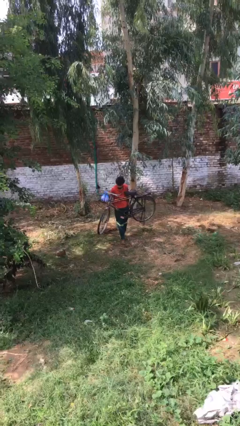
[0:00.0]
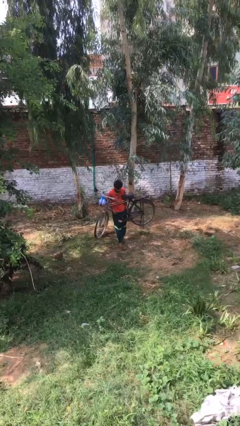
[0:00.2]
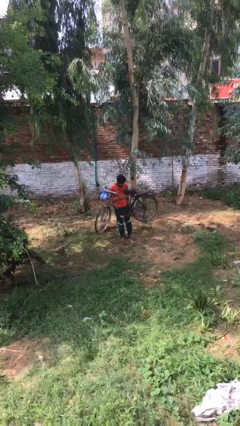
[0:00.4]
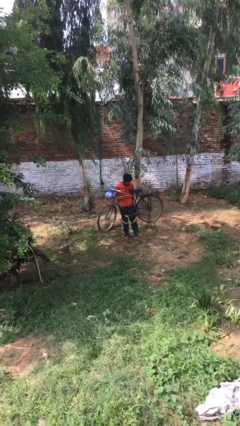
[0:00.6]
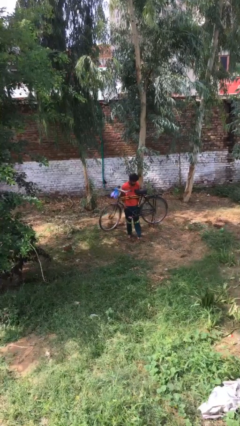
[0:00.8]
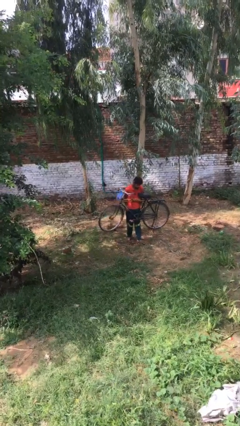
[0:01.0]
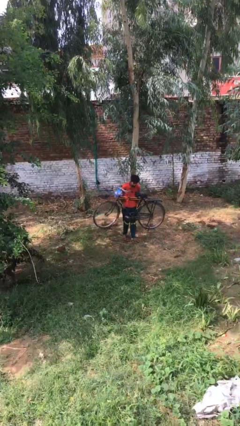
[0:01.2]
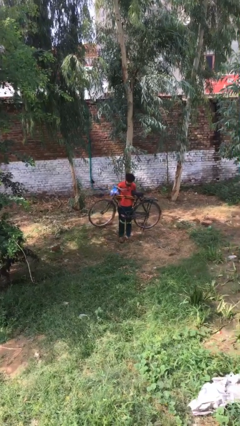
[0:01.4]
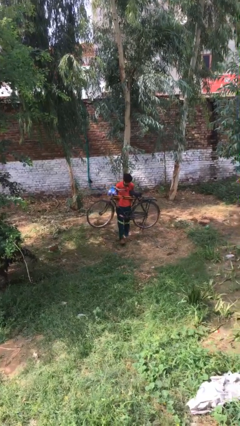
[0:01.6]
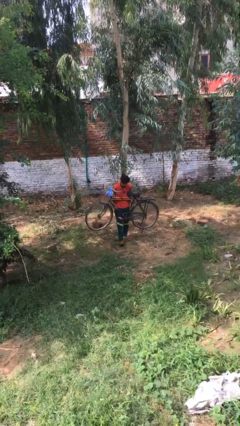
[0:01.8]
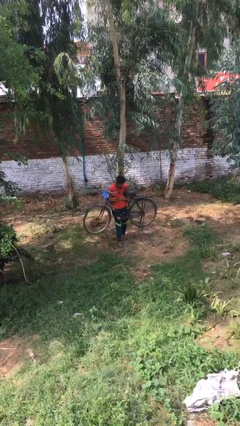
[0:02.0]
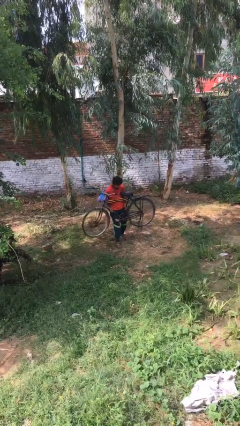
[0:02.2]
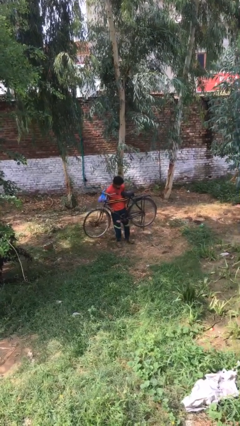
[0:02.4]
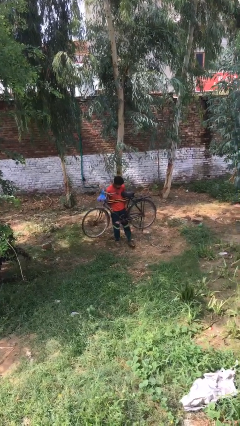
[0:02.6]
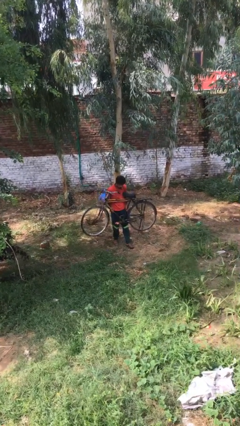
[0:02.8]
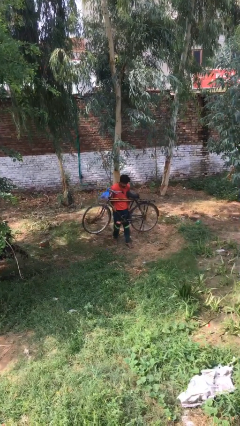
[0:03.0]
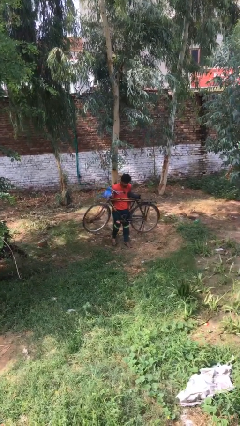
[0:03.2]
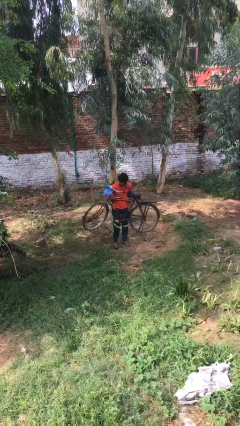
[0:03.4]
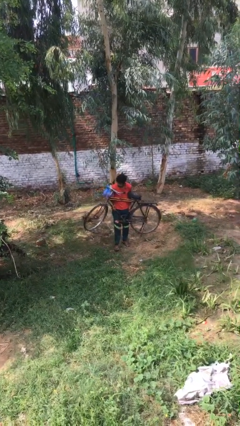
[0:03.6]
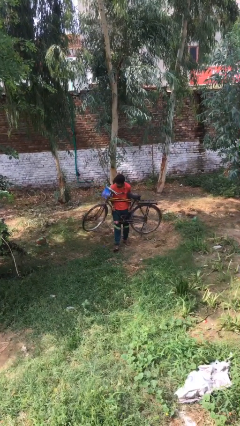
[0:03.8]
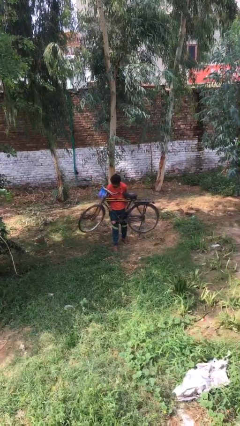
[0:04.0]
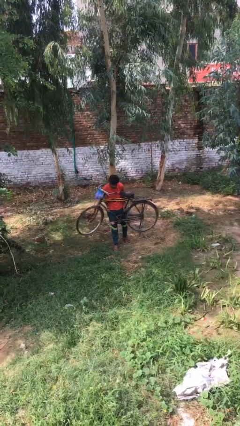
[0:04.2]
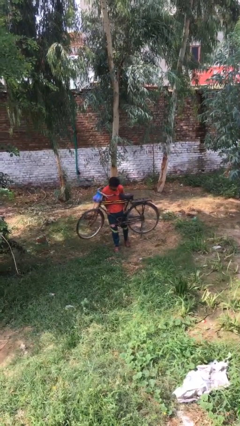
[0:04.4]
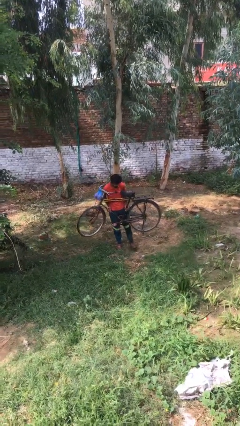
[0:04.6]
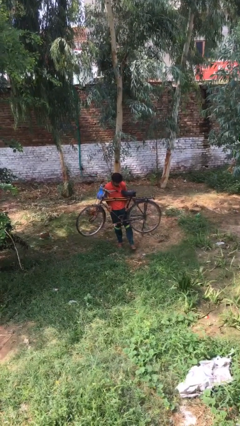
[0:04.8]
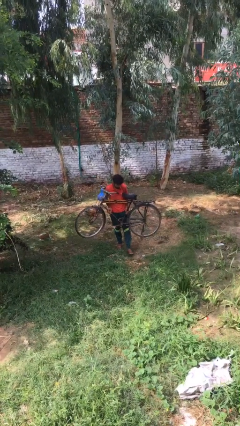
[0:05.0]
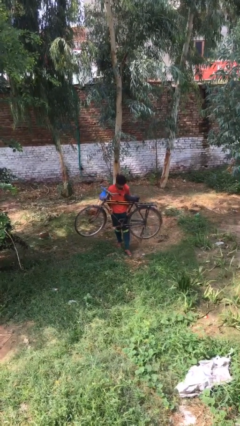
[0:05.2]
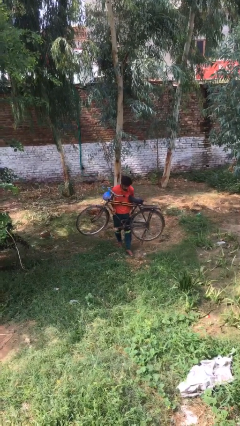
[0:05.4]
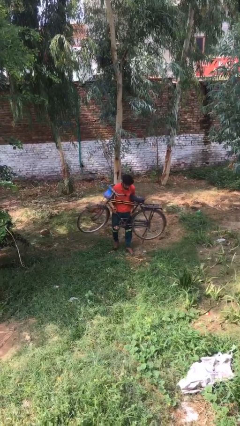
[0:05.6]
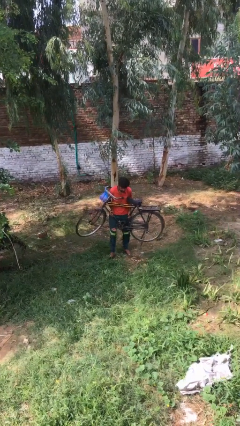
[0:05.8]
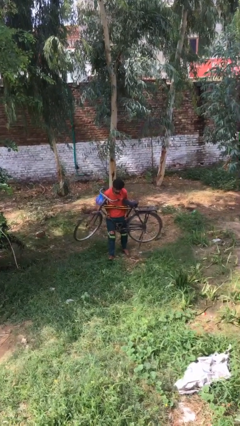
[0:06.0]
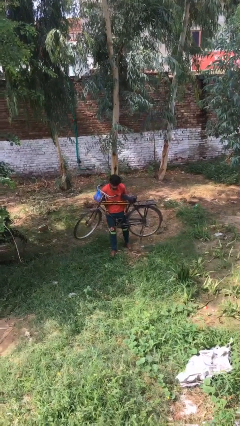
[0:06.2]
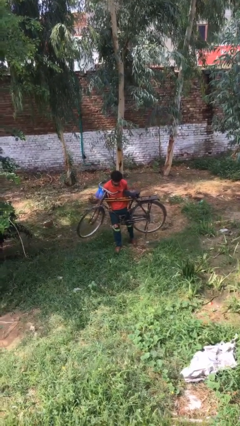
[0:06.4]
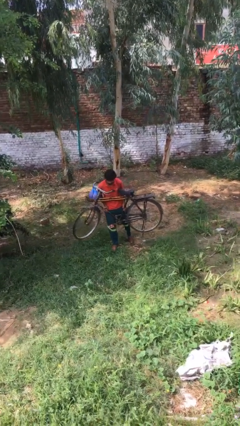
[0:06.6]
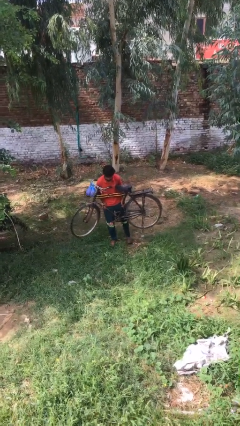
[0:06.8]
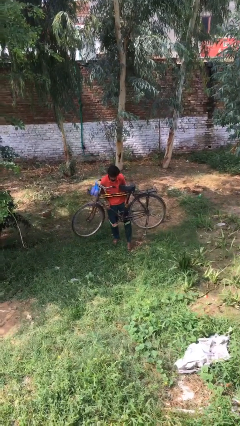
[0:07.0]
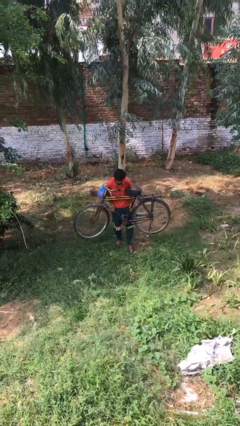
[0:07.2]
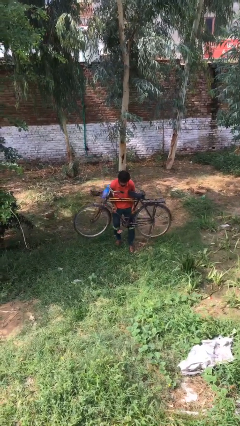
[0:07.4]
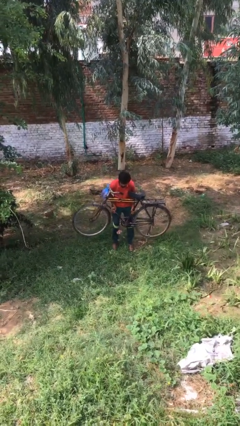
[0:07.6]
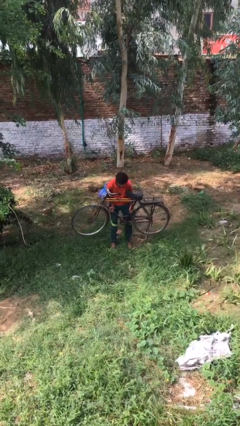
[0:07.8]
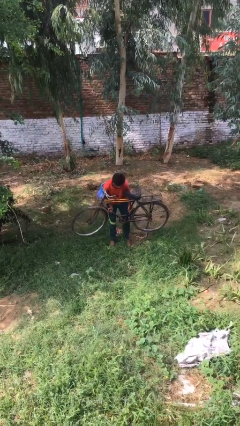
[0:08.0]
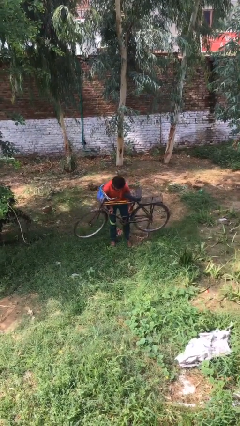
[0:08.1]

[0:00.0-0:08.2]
person carries heavy object

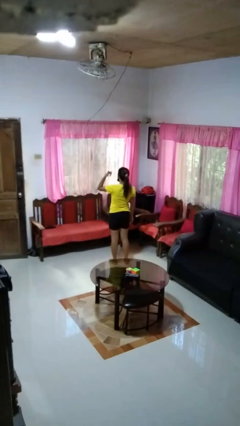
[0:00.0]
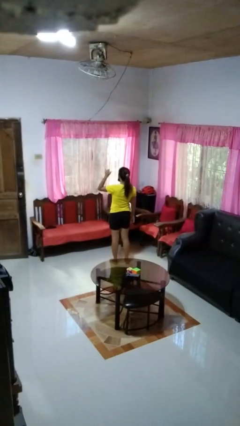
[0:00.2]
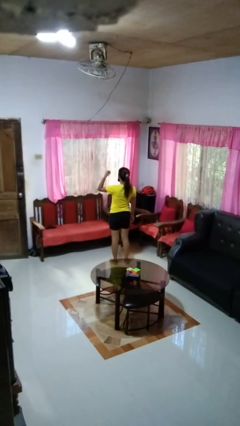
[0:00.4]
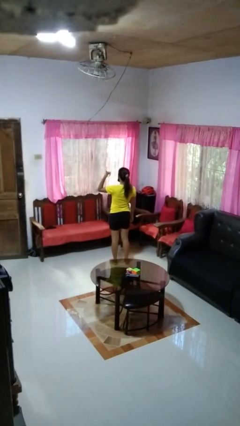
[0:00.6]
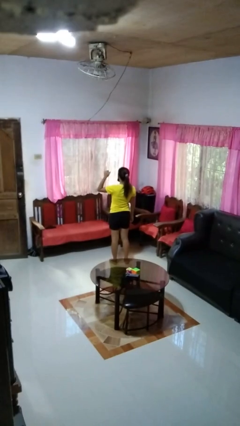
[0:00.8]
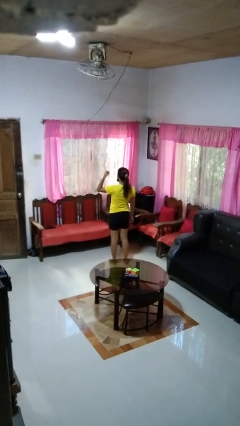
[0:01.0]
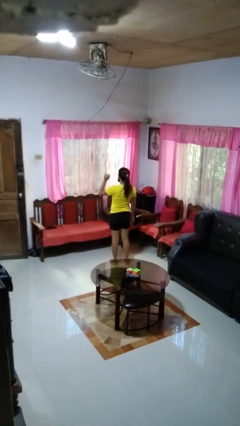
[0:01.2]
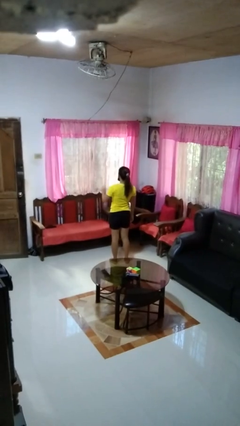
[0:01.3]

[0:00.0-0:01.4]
person gestures hang loose

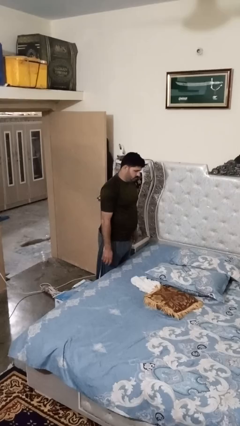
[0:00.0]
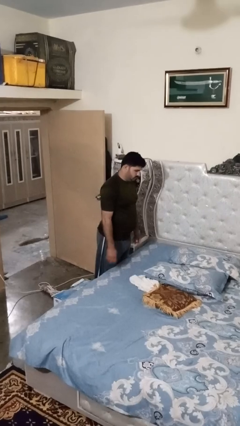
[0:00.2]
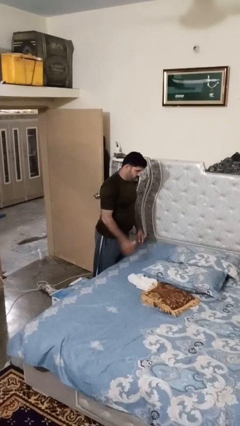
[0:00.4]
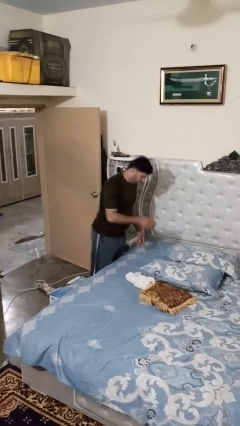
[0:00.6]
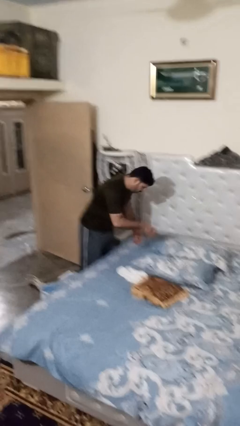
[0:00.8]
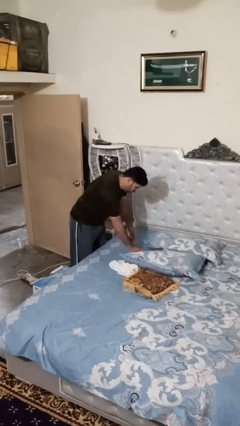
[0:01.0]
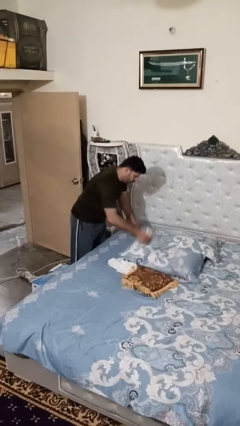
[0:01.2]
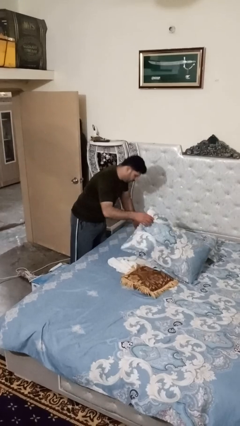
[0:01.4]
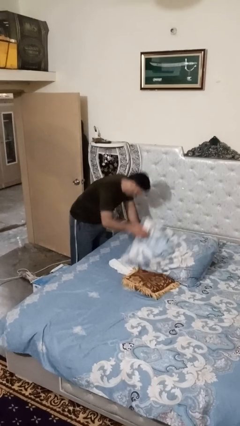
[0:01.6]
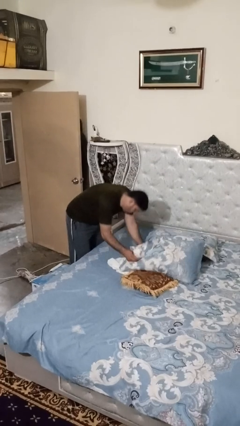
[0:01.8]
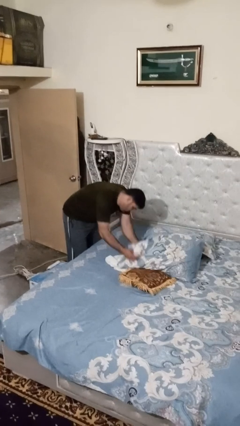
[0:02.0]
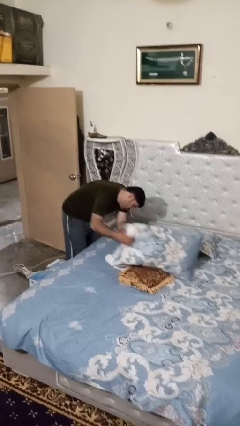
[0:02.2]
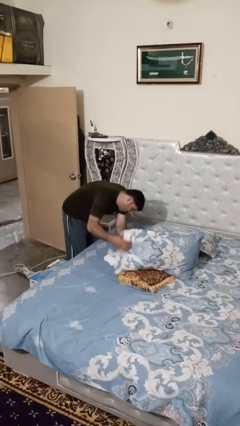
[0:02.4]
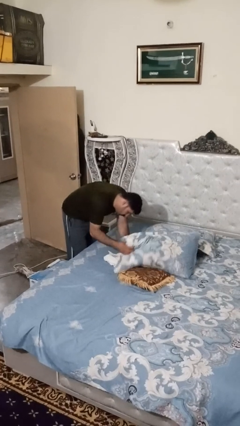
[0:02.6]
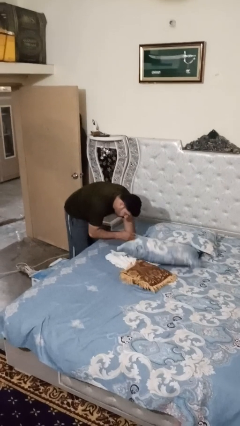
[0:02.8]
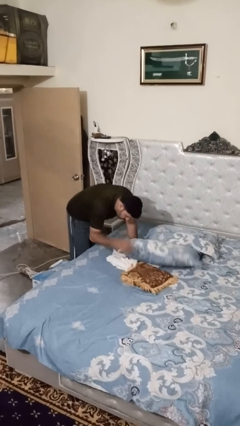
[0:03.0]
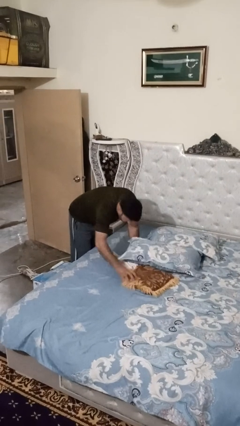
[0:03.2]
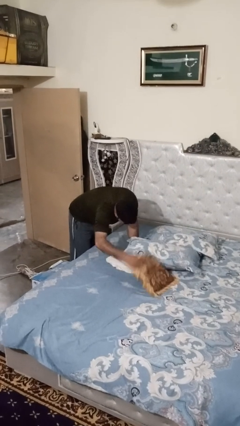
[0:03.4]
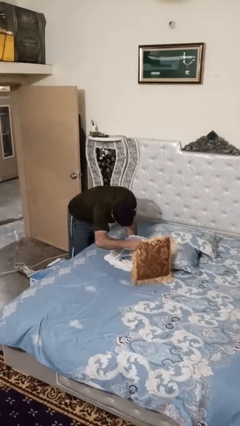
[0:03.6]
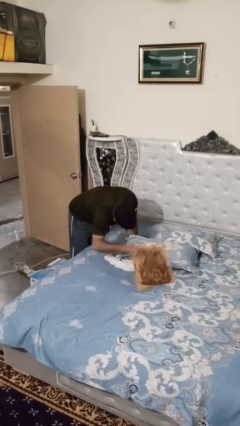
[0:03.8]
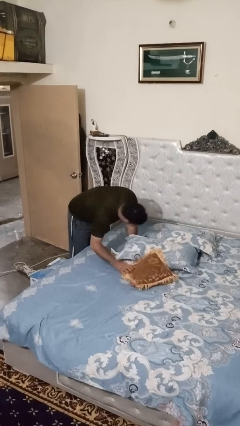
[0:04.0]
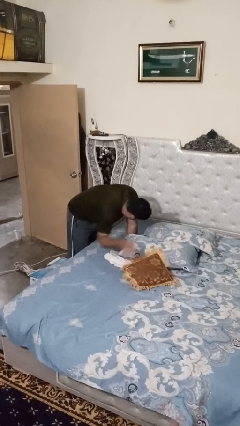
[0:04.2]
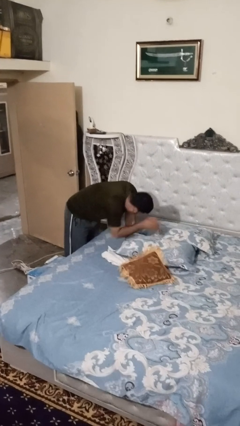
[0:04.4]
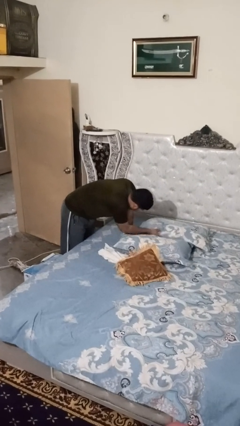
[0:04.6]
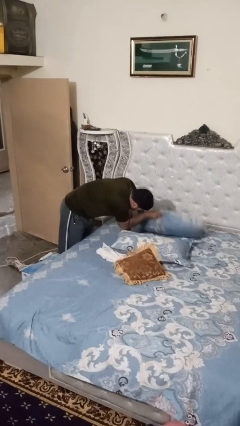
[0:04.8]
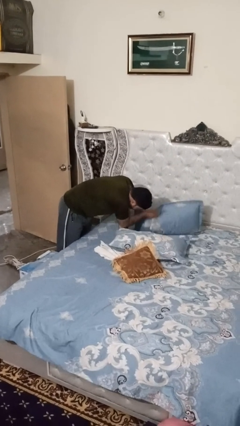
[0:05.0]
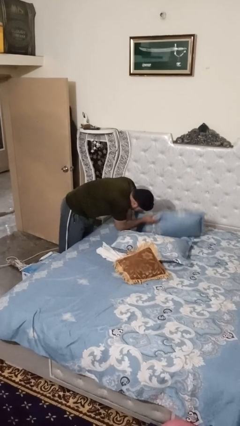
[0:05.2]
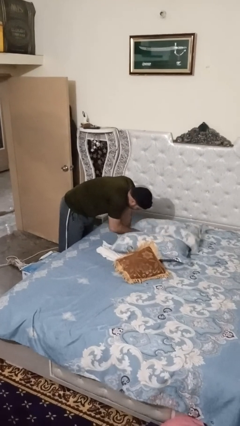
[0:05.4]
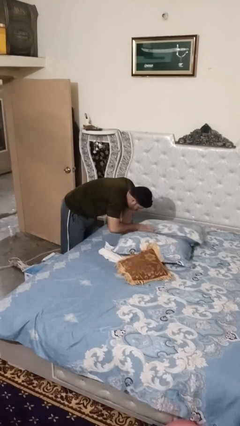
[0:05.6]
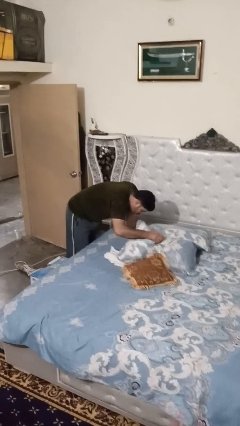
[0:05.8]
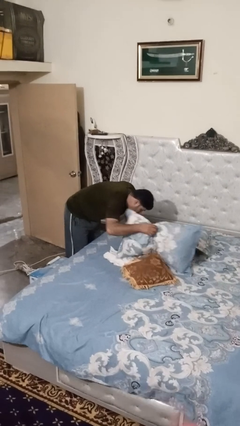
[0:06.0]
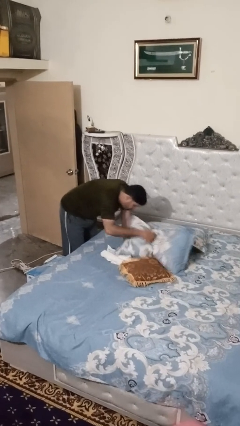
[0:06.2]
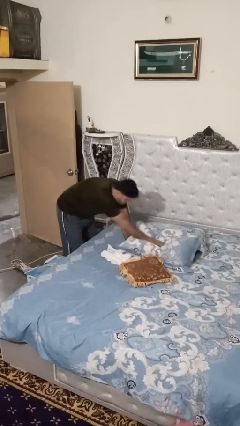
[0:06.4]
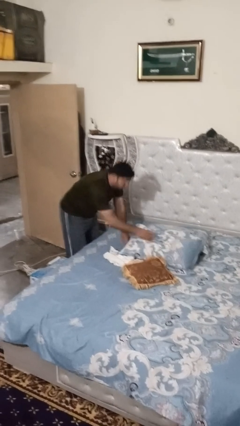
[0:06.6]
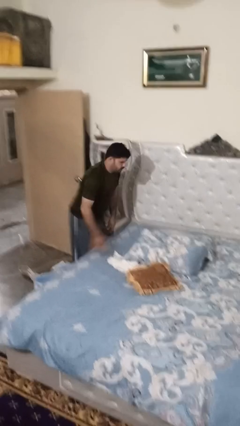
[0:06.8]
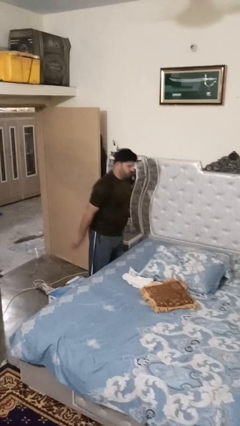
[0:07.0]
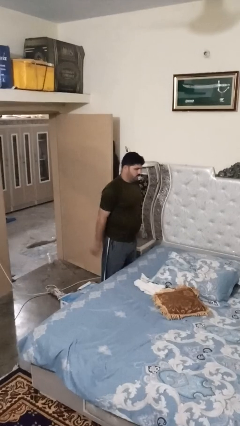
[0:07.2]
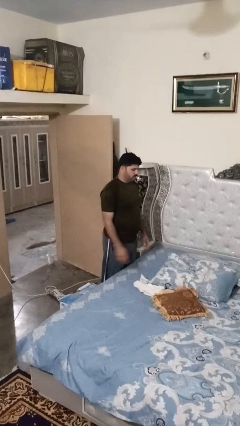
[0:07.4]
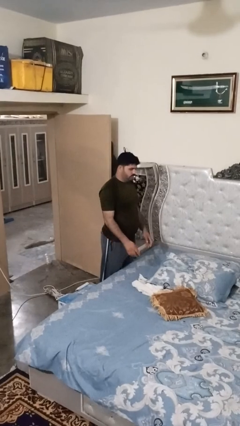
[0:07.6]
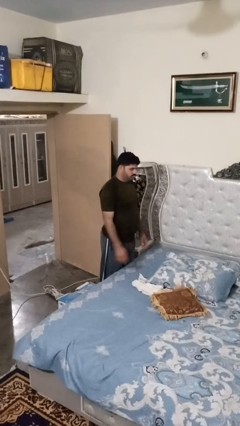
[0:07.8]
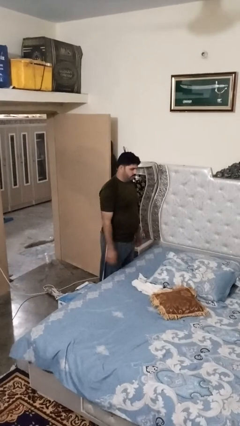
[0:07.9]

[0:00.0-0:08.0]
person searches under bed

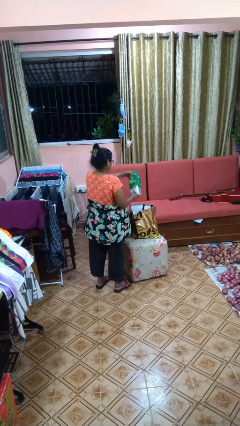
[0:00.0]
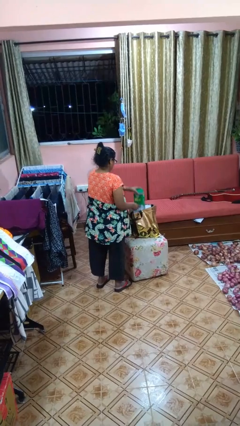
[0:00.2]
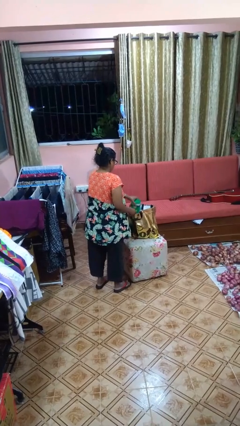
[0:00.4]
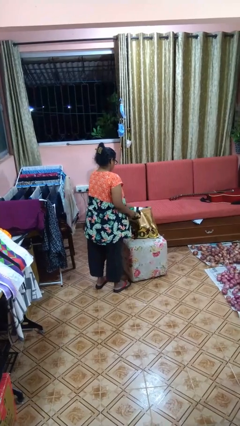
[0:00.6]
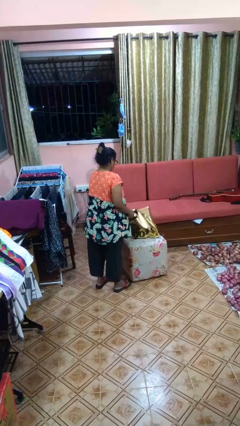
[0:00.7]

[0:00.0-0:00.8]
person puts object into bag
